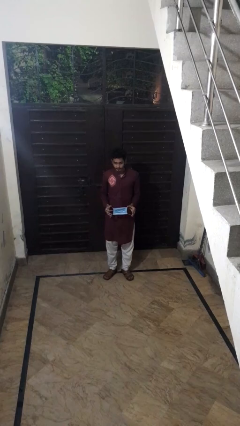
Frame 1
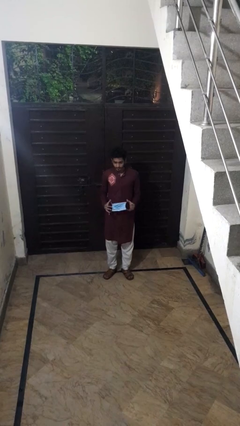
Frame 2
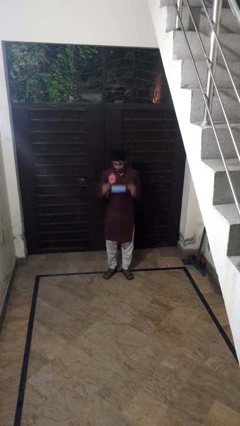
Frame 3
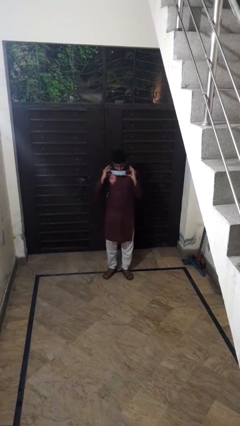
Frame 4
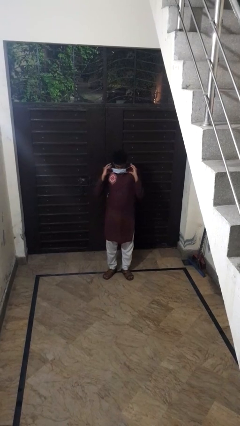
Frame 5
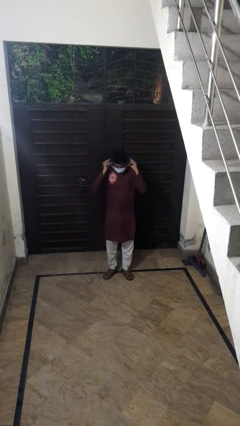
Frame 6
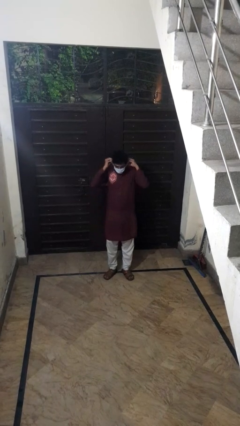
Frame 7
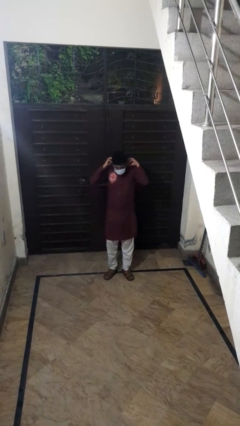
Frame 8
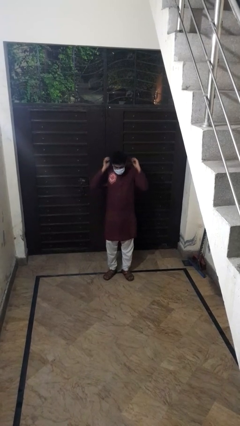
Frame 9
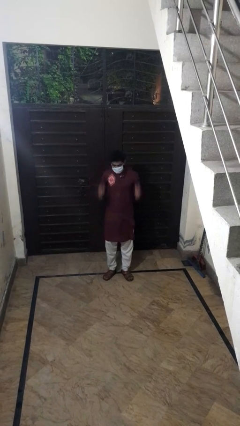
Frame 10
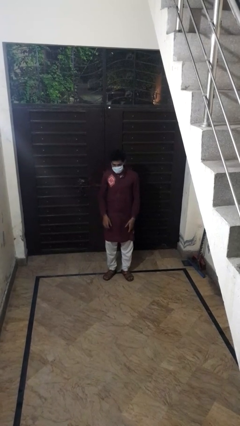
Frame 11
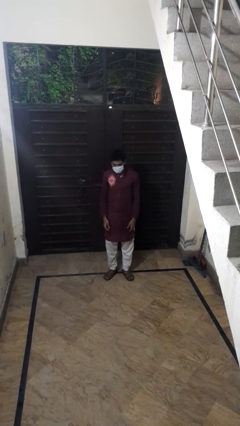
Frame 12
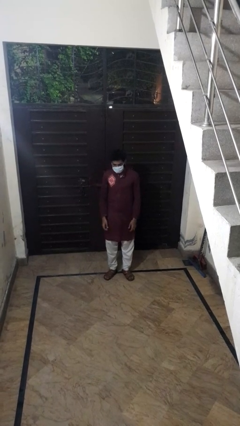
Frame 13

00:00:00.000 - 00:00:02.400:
person puts on facemask

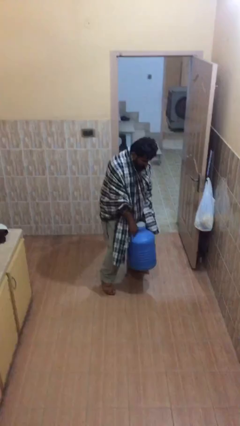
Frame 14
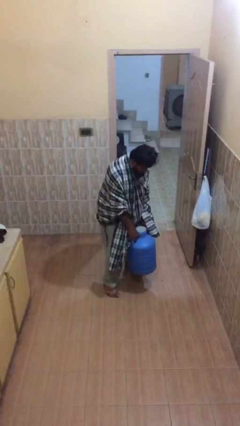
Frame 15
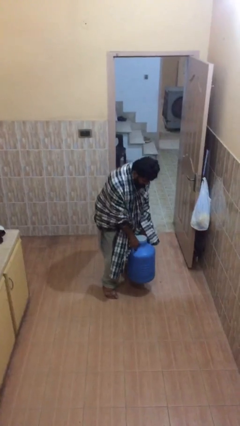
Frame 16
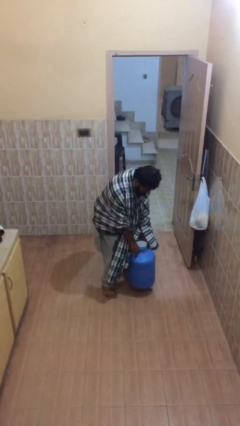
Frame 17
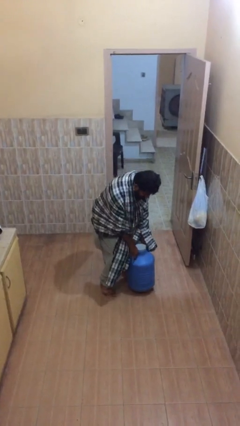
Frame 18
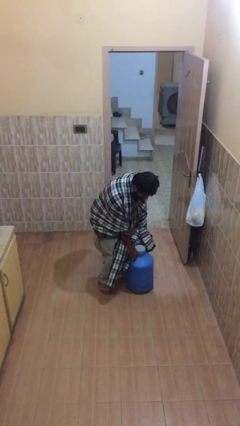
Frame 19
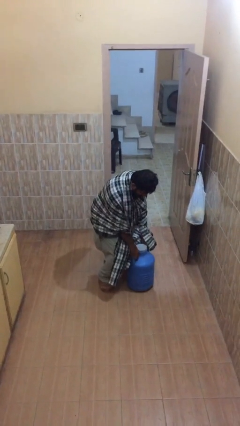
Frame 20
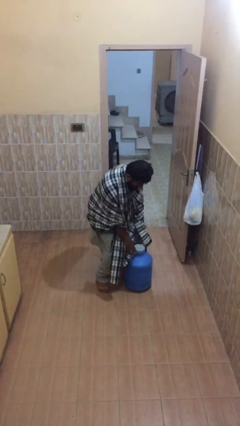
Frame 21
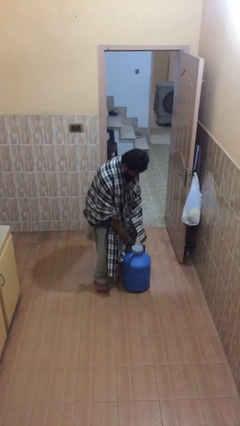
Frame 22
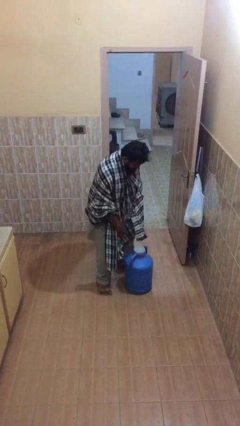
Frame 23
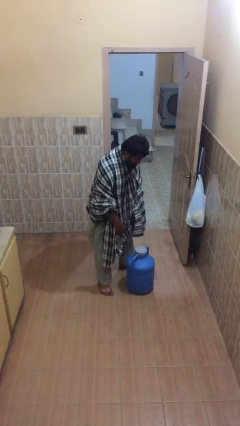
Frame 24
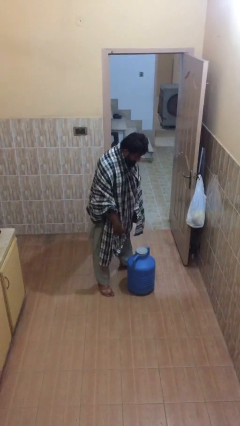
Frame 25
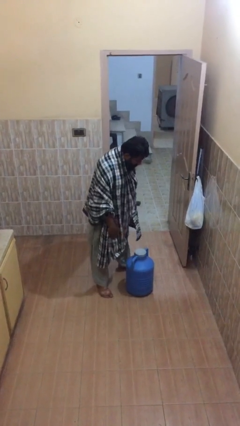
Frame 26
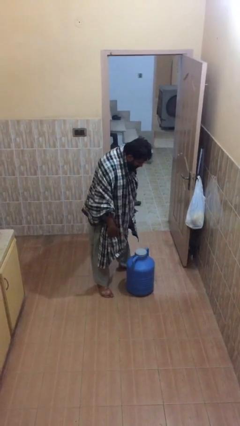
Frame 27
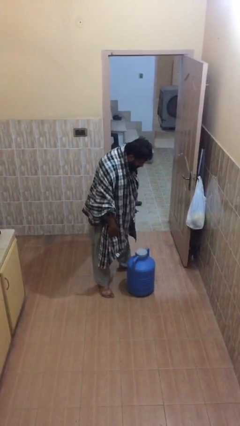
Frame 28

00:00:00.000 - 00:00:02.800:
person puts down object on floor

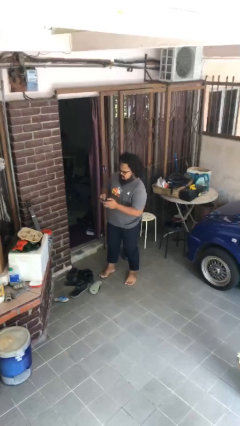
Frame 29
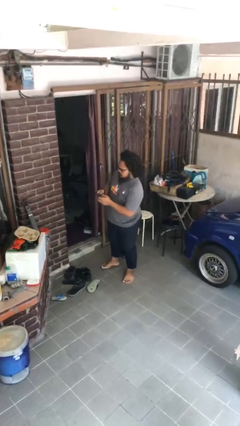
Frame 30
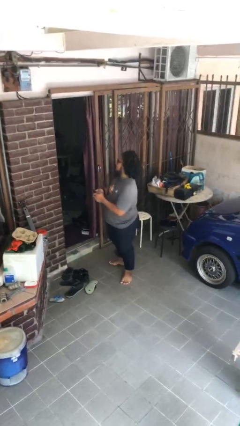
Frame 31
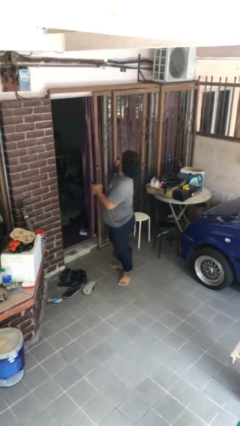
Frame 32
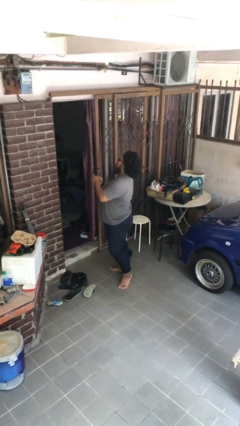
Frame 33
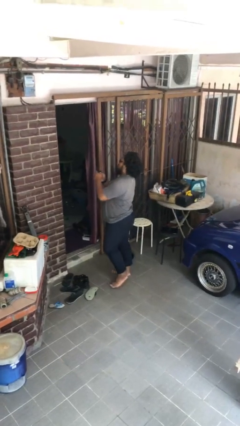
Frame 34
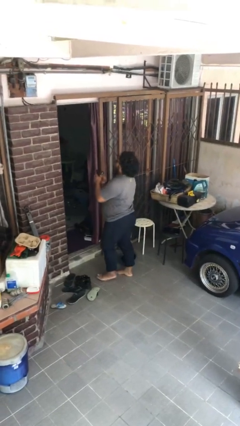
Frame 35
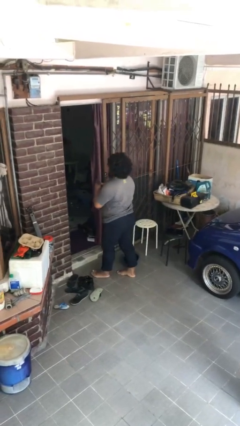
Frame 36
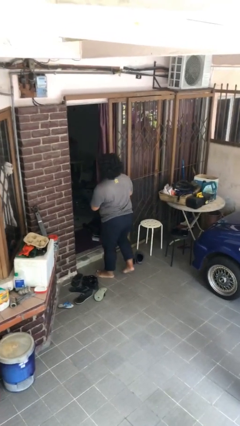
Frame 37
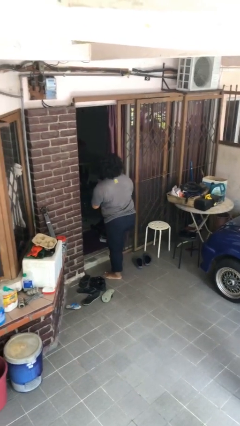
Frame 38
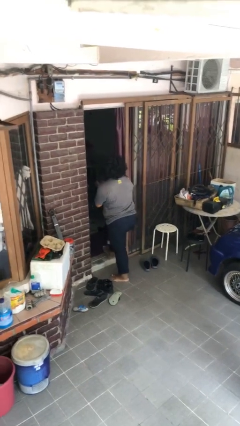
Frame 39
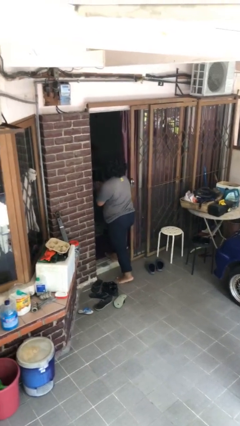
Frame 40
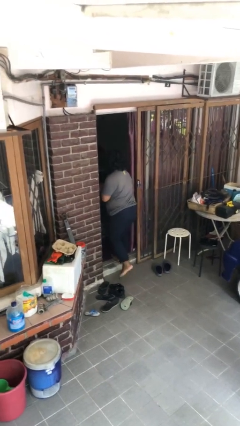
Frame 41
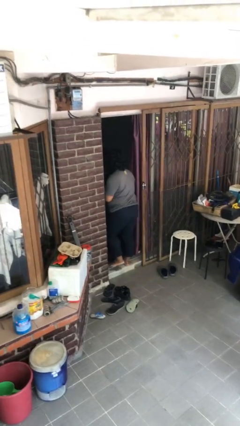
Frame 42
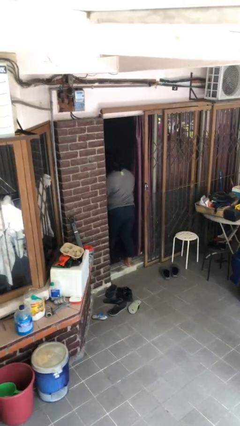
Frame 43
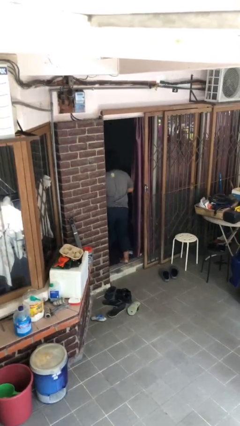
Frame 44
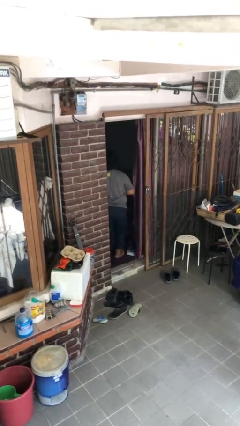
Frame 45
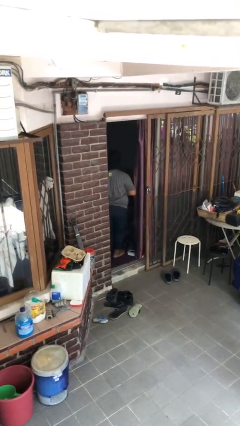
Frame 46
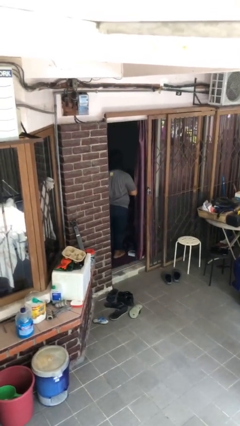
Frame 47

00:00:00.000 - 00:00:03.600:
person exits scene through structure

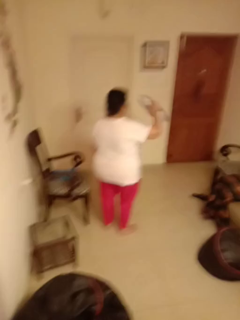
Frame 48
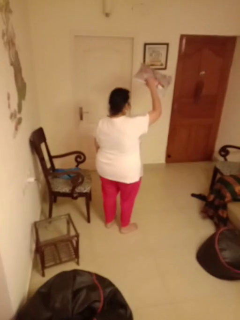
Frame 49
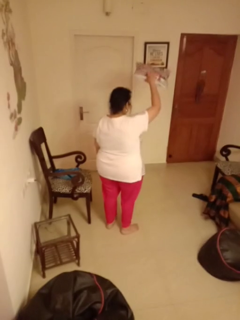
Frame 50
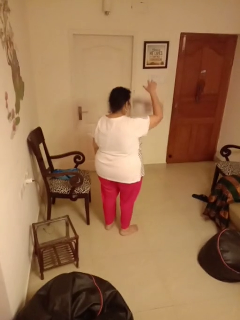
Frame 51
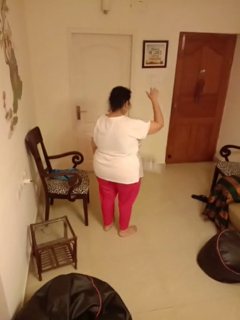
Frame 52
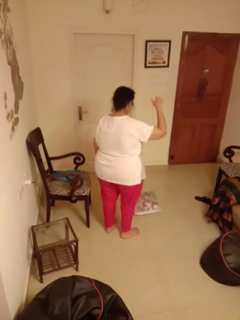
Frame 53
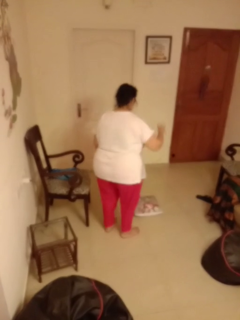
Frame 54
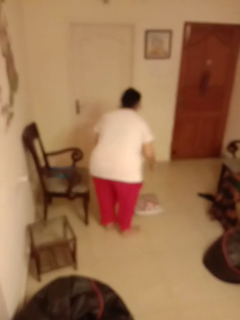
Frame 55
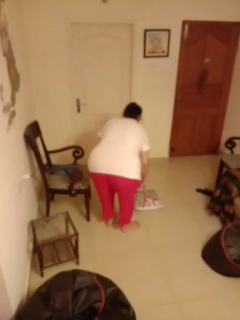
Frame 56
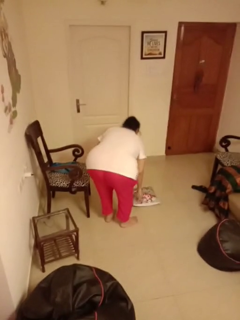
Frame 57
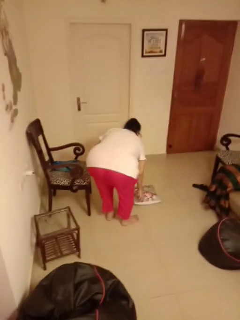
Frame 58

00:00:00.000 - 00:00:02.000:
person throws object into air

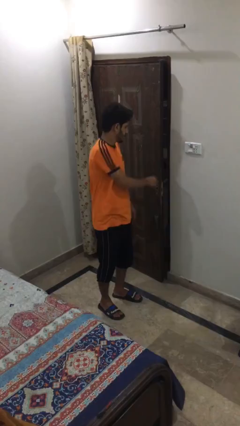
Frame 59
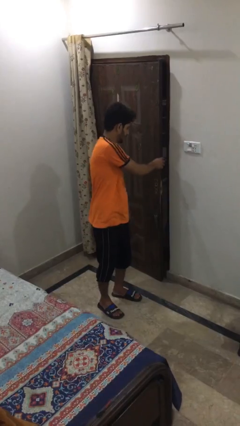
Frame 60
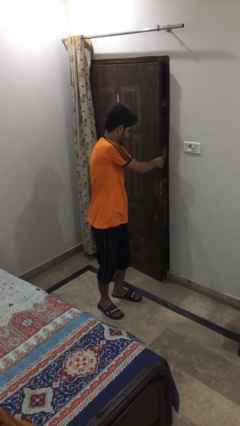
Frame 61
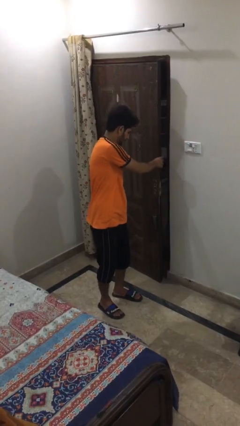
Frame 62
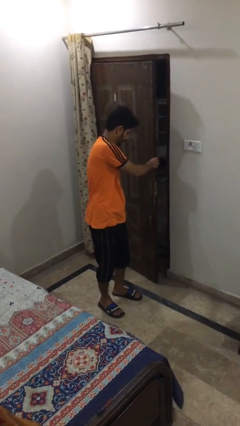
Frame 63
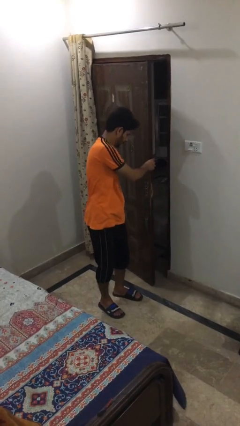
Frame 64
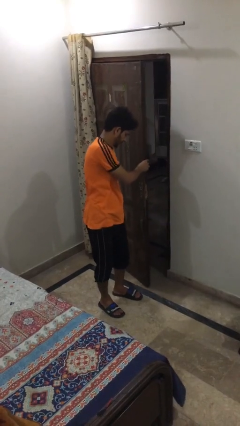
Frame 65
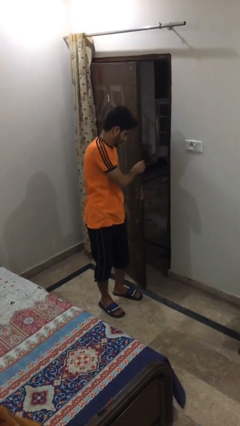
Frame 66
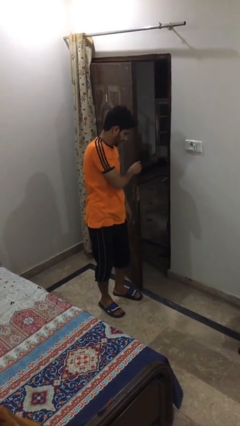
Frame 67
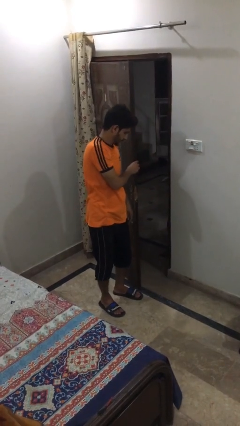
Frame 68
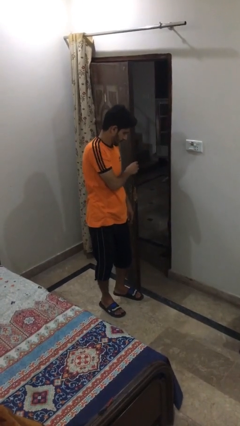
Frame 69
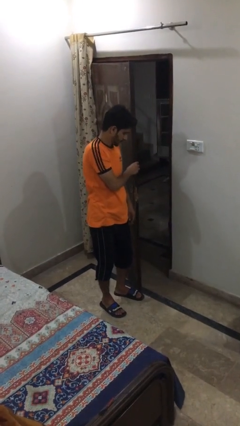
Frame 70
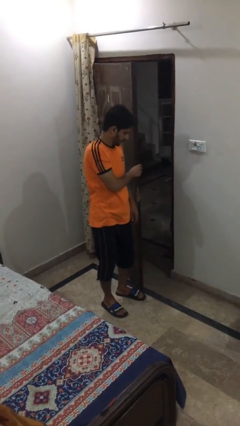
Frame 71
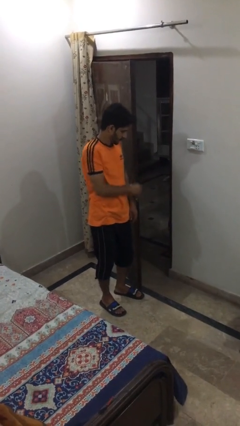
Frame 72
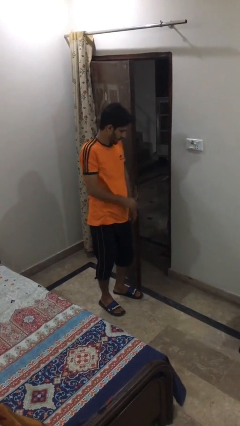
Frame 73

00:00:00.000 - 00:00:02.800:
person opens facility door

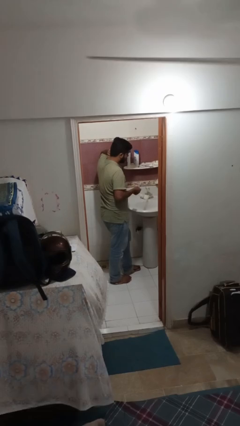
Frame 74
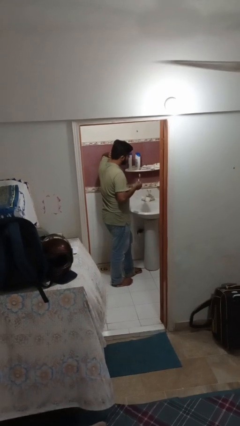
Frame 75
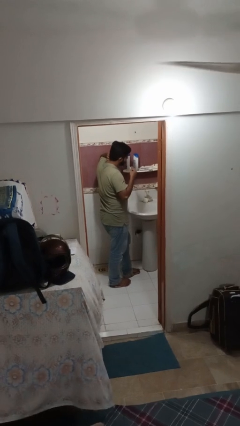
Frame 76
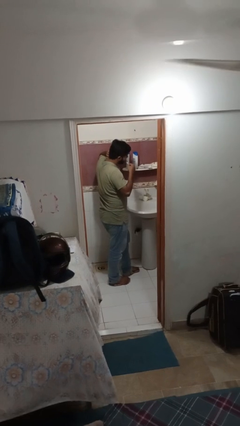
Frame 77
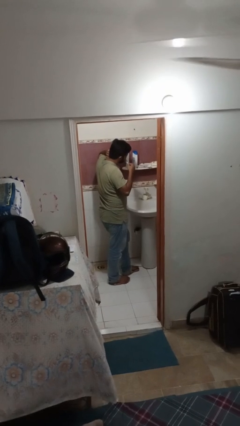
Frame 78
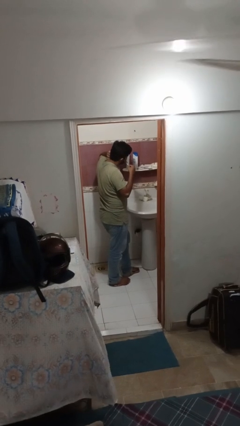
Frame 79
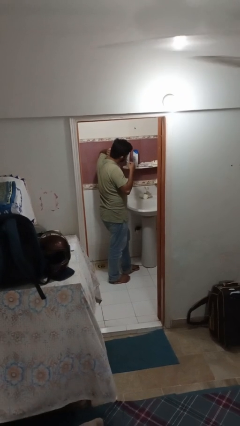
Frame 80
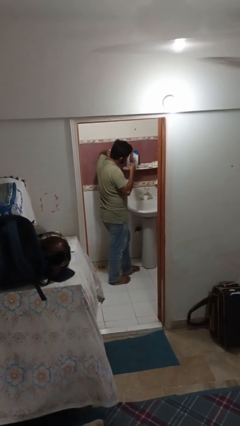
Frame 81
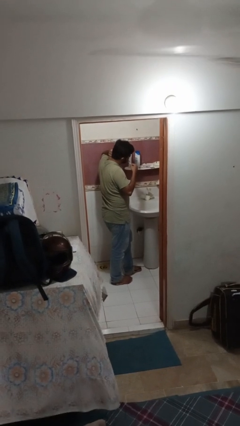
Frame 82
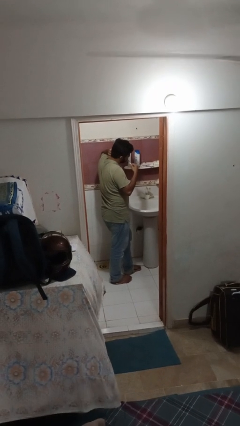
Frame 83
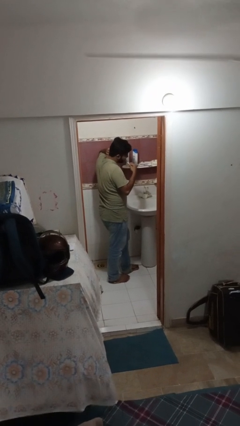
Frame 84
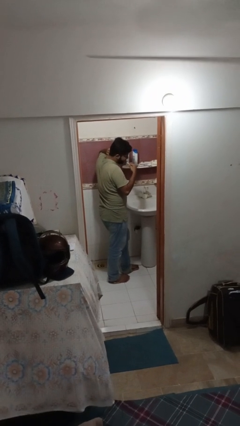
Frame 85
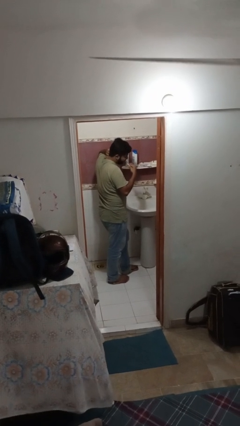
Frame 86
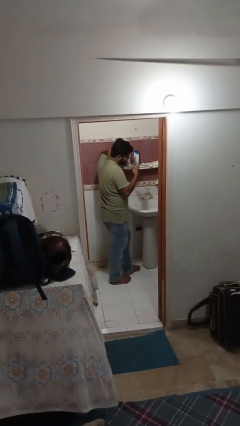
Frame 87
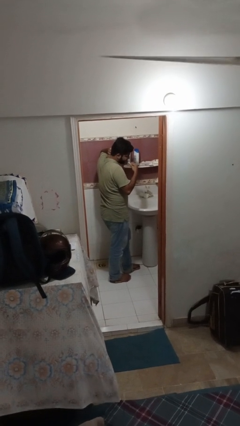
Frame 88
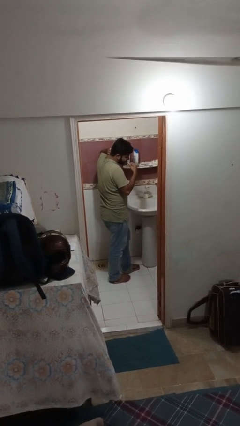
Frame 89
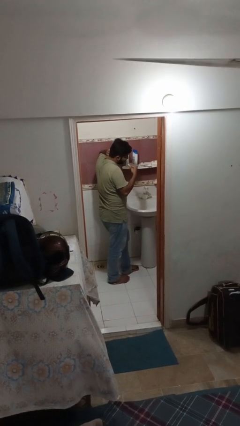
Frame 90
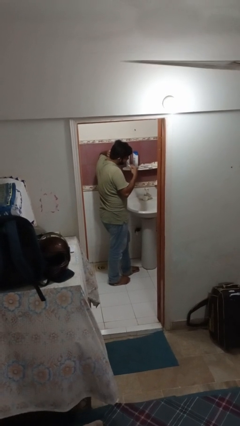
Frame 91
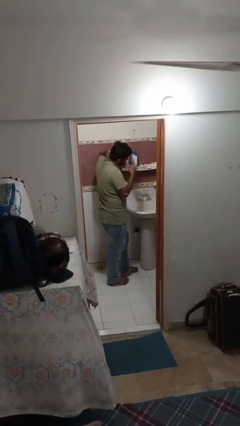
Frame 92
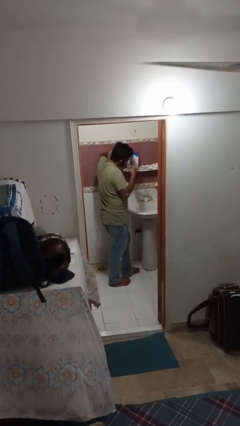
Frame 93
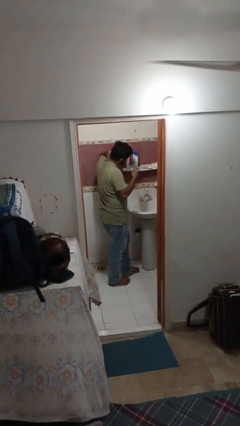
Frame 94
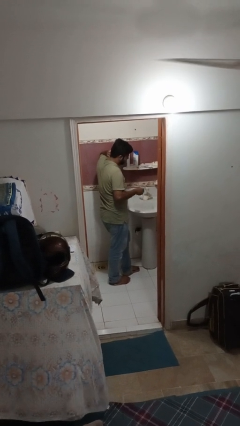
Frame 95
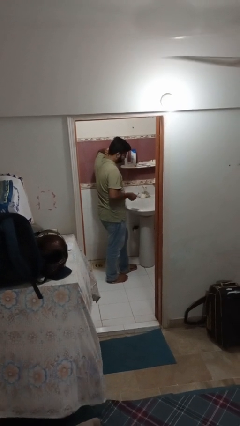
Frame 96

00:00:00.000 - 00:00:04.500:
person brushes teeth

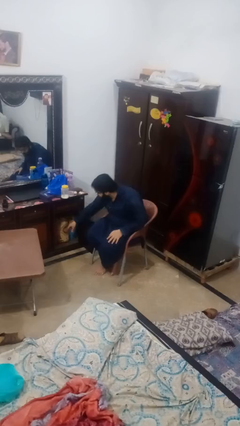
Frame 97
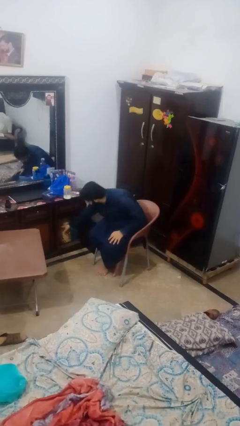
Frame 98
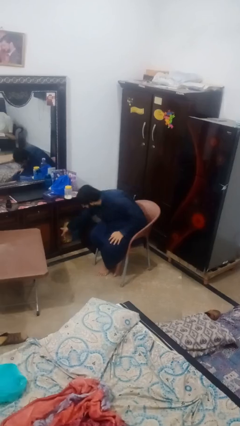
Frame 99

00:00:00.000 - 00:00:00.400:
person takes clothes from dresser
